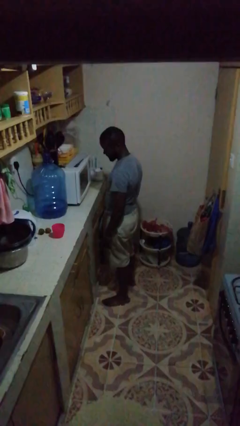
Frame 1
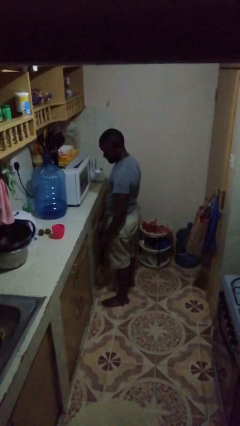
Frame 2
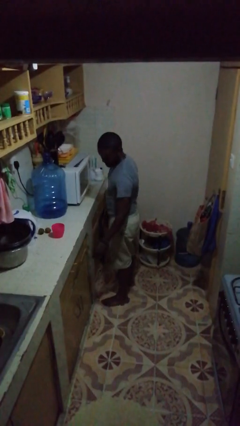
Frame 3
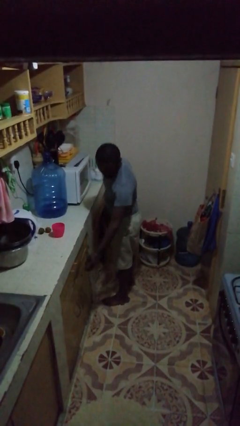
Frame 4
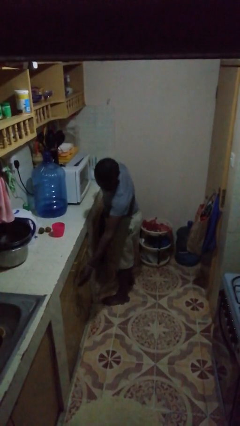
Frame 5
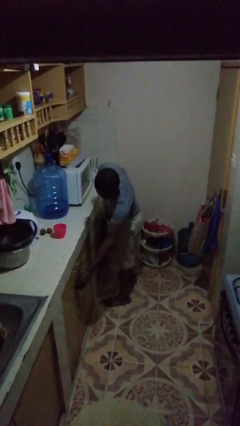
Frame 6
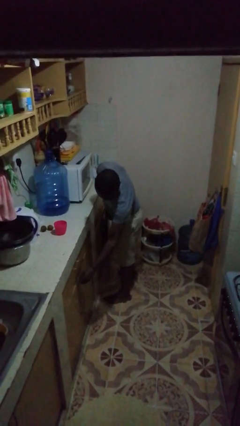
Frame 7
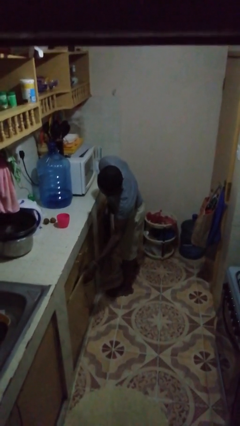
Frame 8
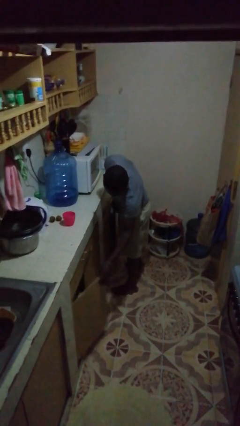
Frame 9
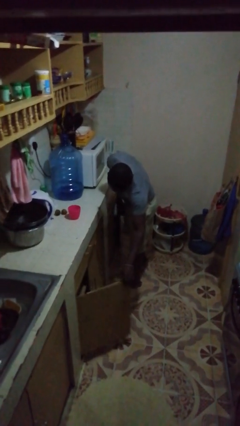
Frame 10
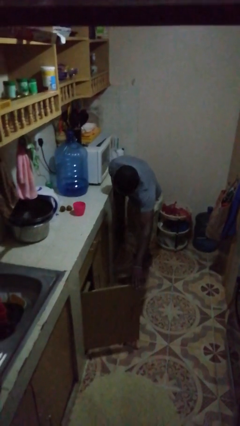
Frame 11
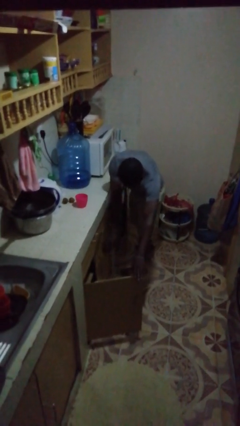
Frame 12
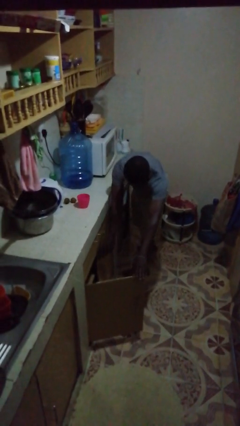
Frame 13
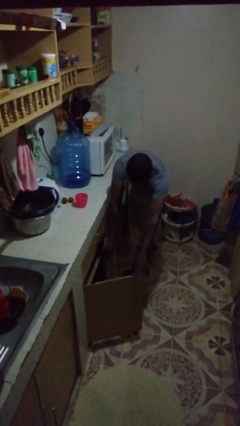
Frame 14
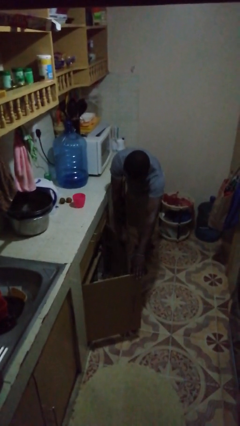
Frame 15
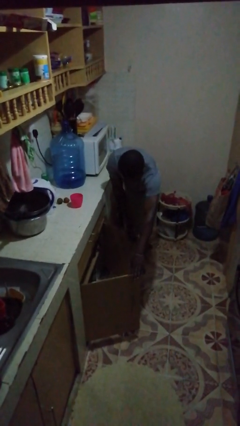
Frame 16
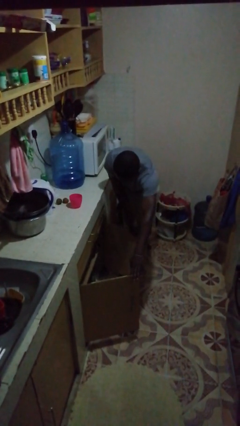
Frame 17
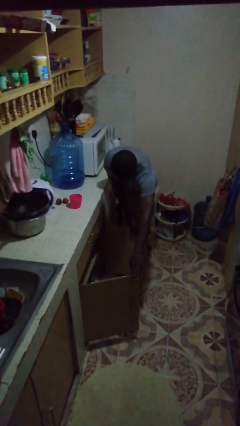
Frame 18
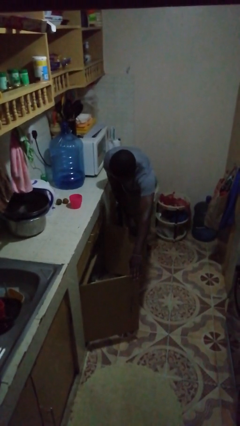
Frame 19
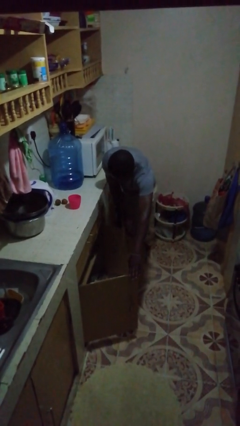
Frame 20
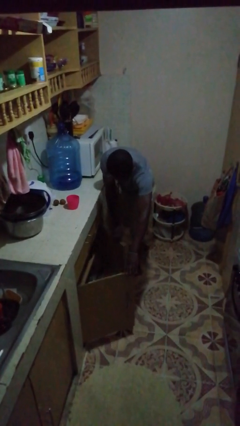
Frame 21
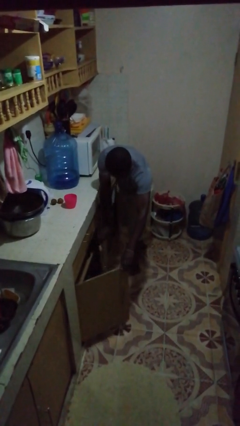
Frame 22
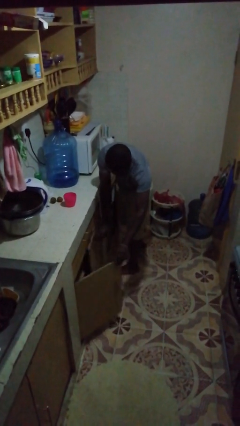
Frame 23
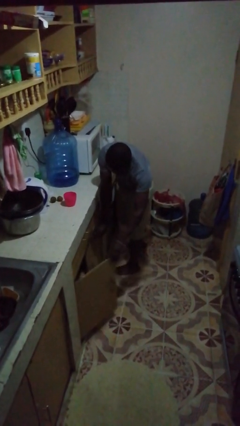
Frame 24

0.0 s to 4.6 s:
person opens cabinet

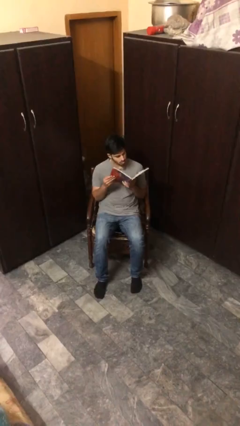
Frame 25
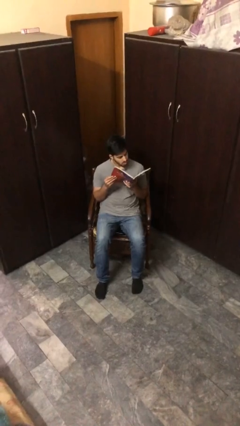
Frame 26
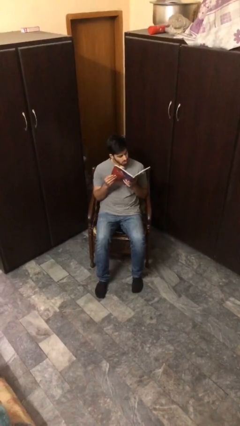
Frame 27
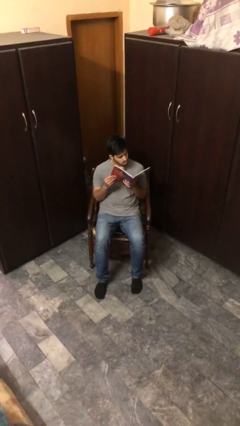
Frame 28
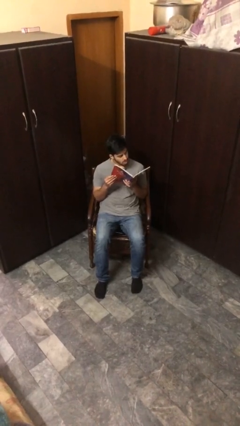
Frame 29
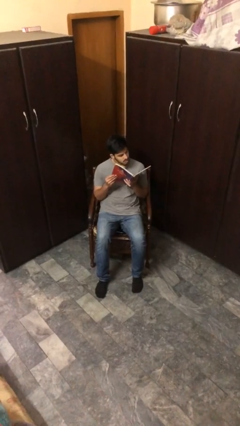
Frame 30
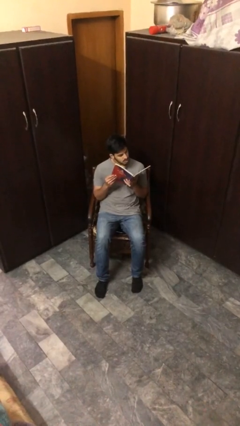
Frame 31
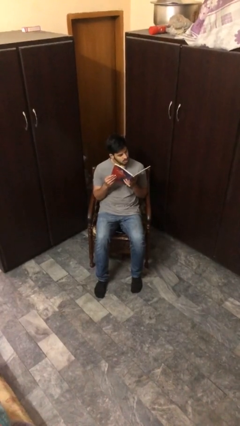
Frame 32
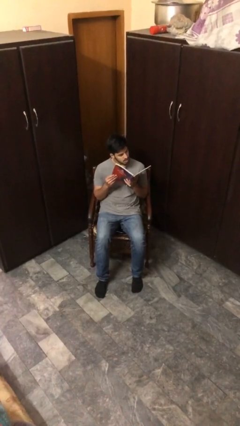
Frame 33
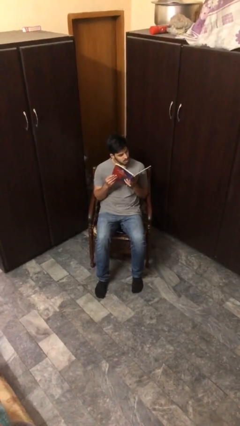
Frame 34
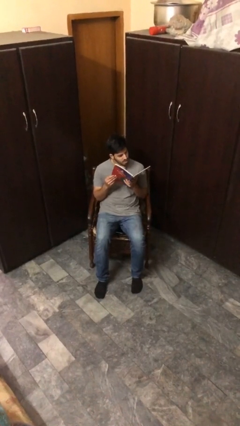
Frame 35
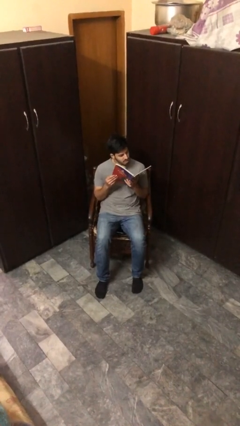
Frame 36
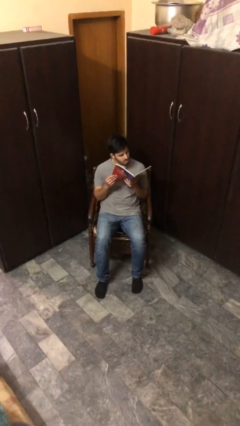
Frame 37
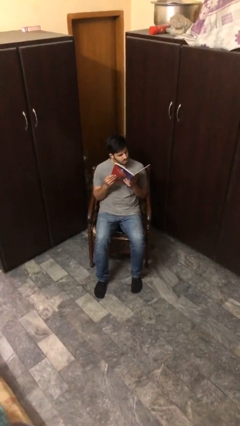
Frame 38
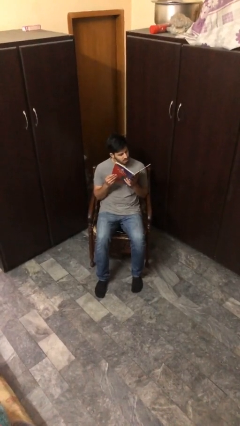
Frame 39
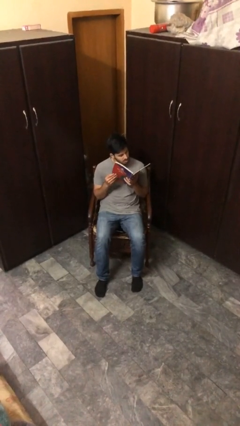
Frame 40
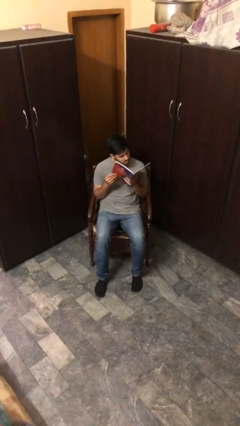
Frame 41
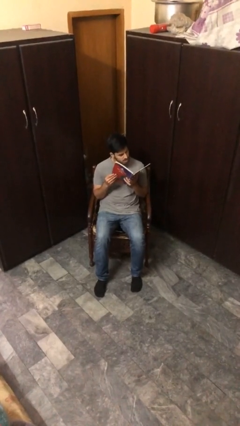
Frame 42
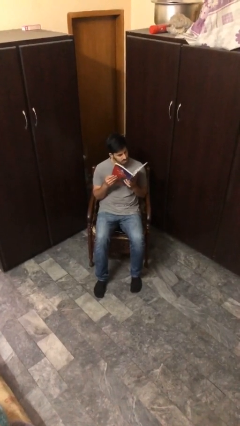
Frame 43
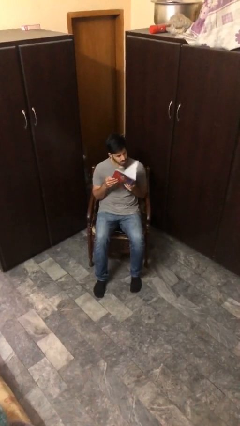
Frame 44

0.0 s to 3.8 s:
person reads document

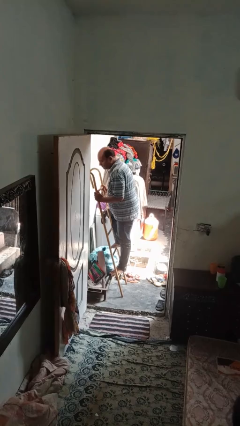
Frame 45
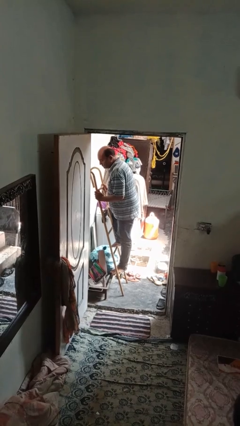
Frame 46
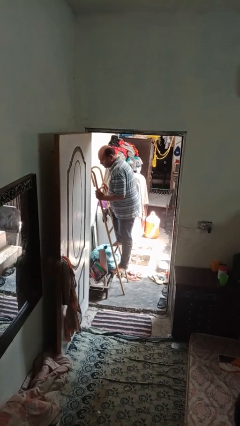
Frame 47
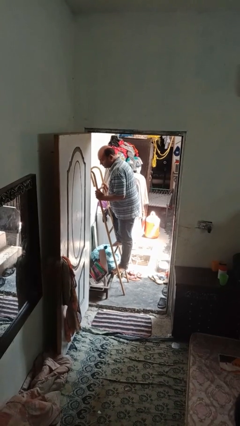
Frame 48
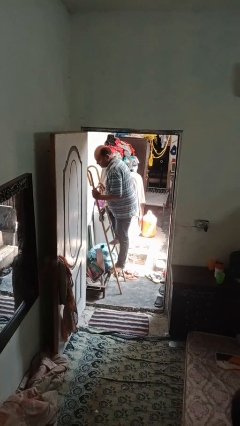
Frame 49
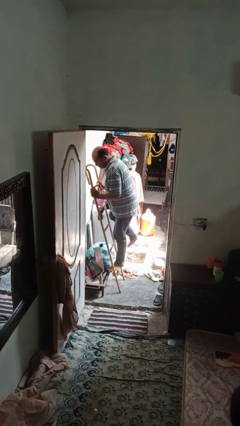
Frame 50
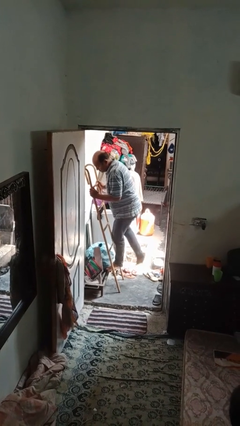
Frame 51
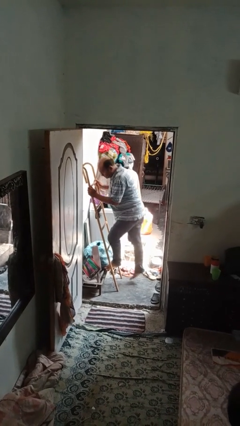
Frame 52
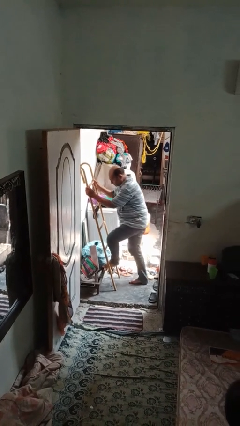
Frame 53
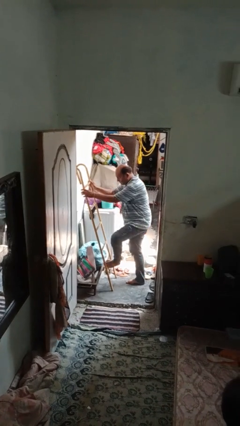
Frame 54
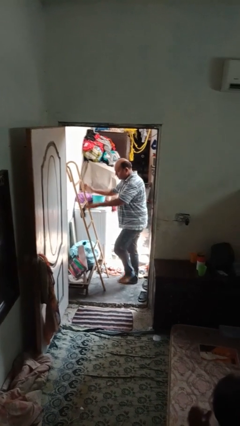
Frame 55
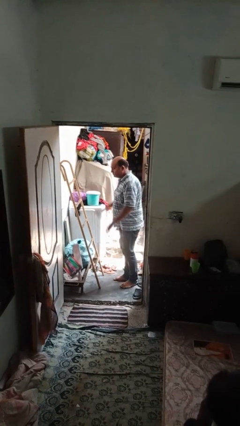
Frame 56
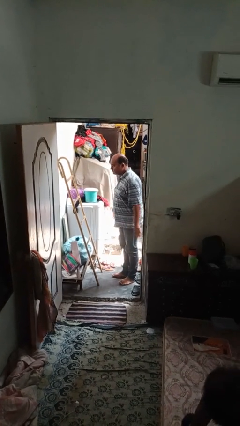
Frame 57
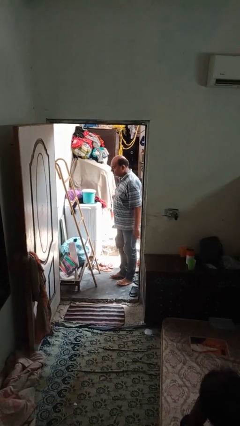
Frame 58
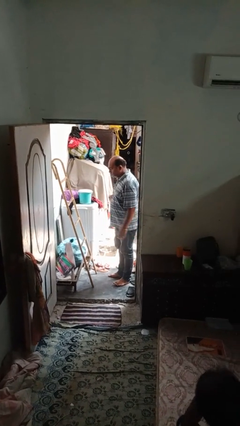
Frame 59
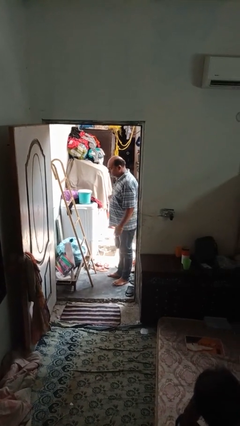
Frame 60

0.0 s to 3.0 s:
person climbs down ladder

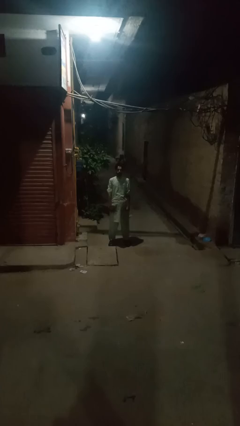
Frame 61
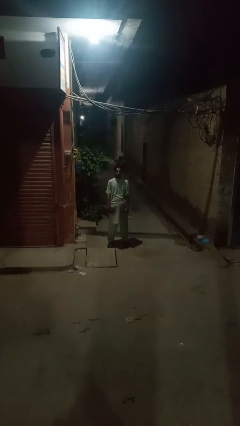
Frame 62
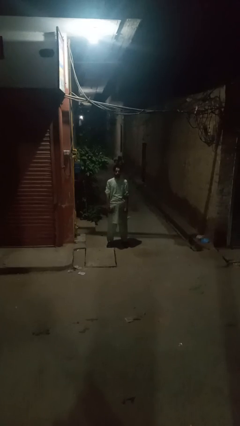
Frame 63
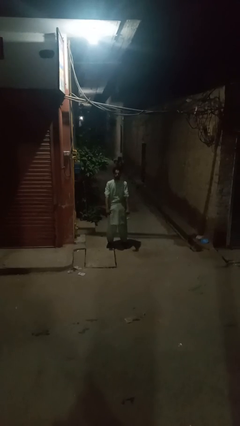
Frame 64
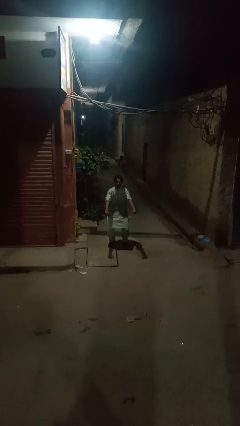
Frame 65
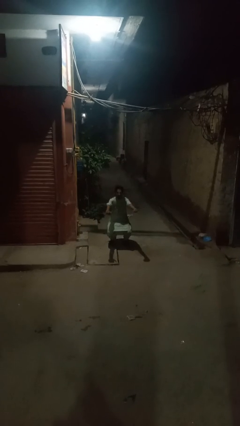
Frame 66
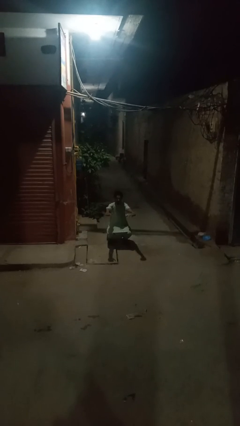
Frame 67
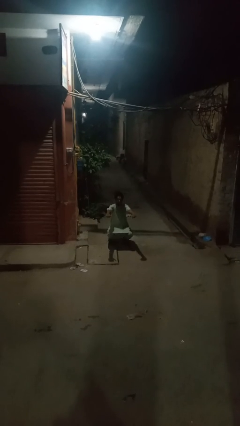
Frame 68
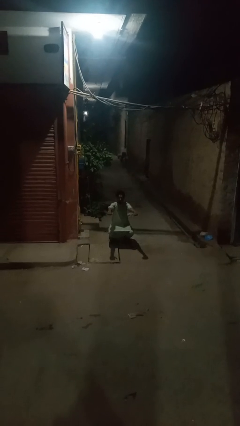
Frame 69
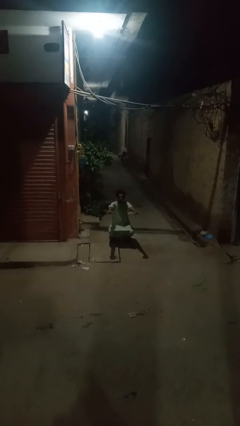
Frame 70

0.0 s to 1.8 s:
person squats

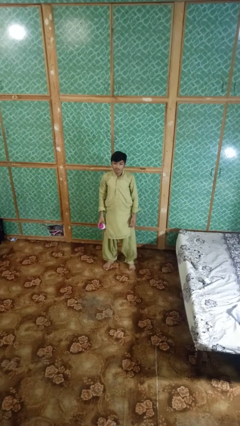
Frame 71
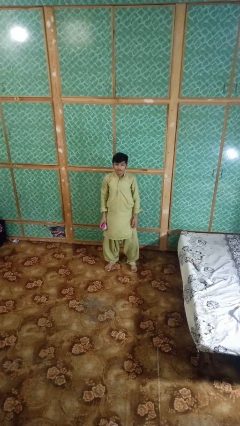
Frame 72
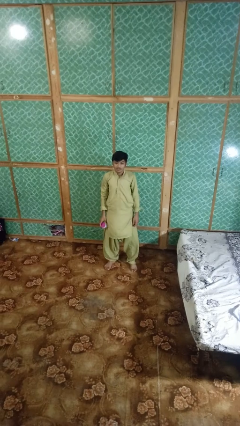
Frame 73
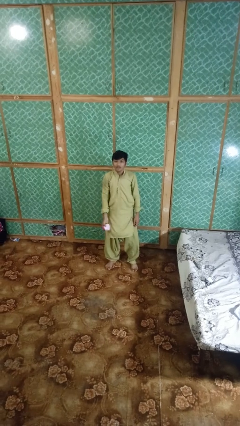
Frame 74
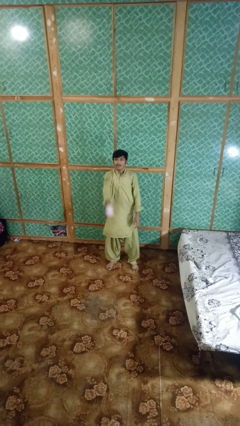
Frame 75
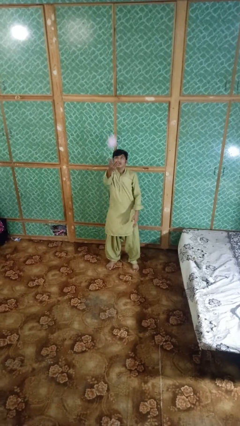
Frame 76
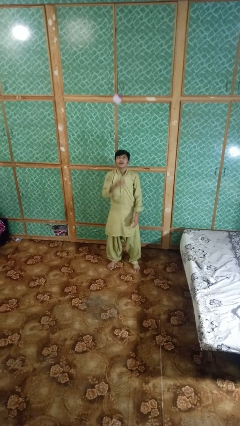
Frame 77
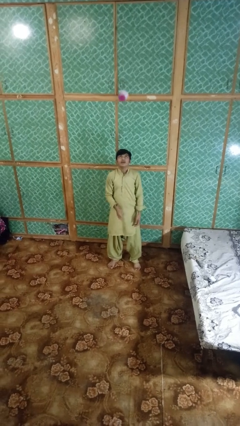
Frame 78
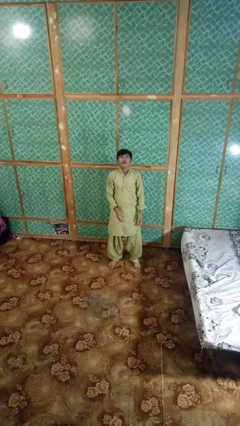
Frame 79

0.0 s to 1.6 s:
person drops object

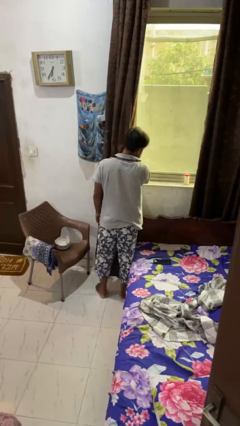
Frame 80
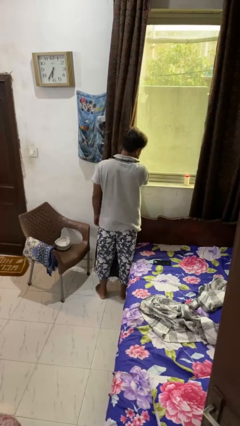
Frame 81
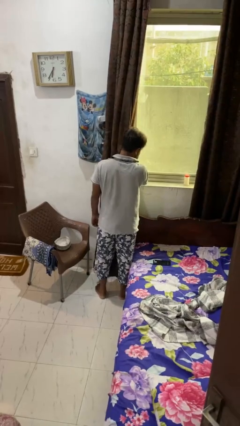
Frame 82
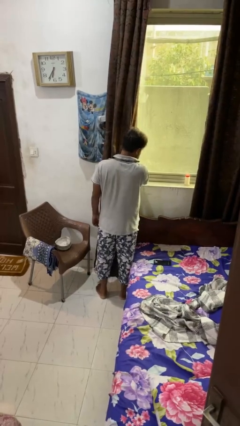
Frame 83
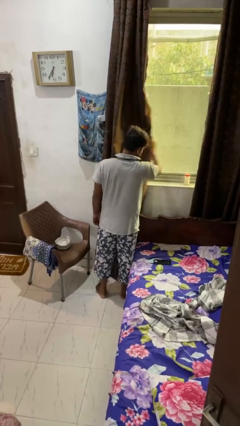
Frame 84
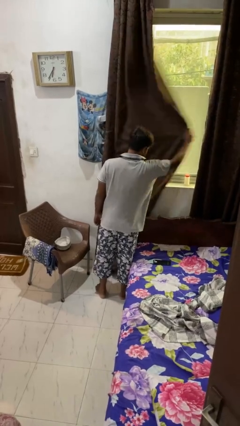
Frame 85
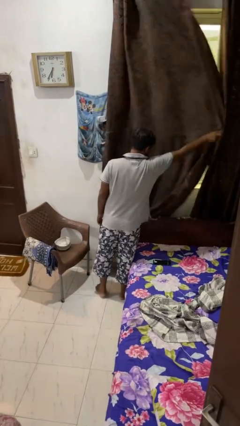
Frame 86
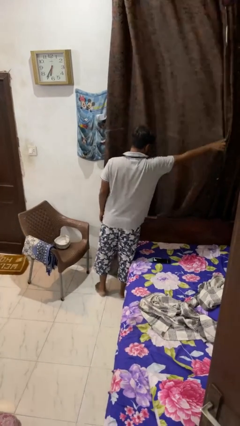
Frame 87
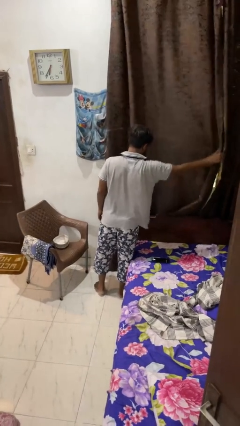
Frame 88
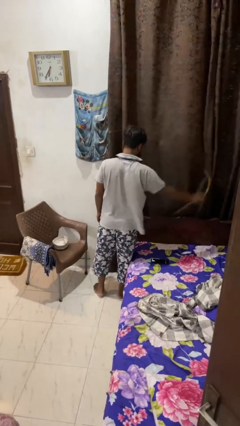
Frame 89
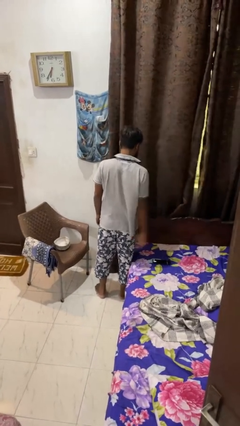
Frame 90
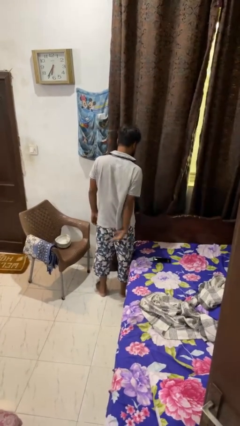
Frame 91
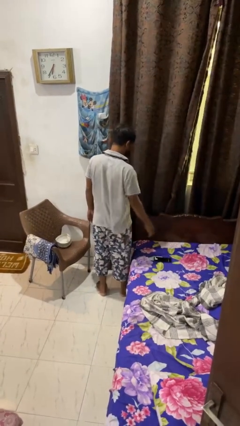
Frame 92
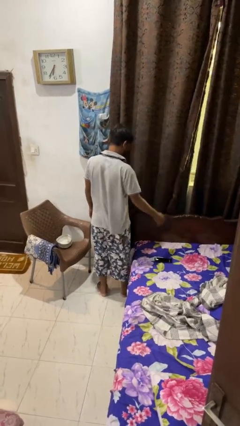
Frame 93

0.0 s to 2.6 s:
person closes curtains

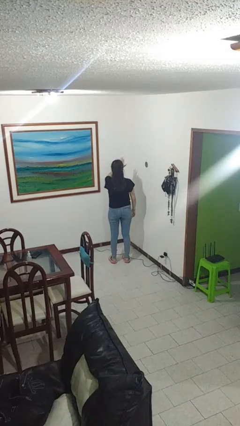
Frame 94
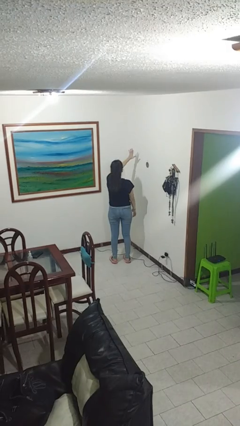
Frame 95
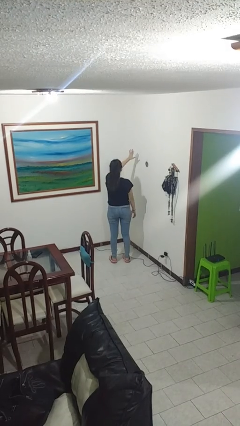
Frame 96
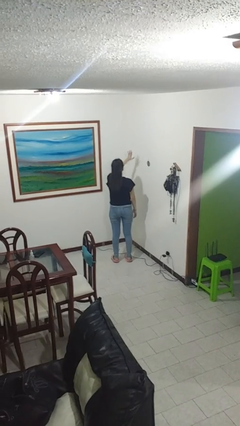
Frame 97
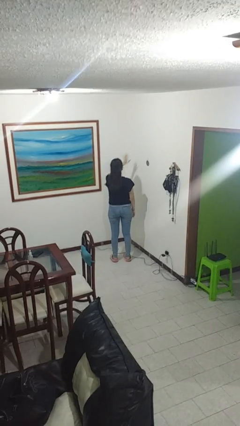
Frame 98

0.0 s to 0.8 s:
person gestures number five
